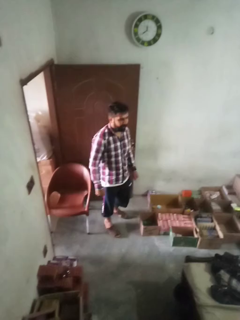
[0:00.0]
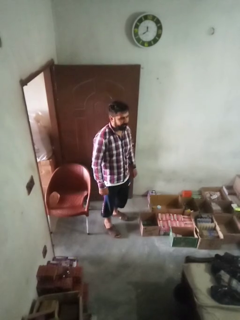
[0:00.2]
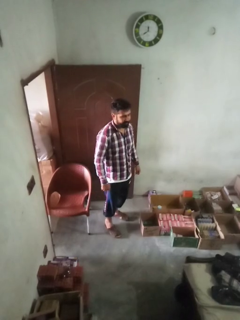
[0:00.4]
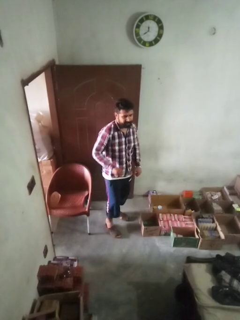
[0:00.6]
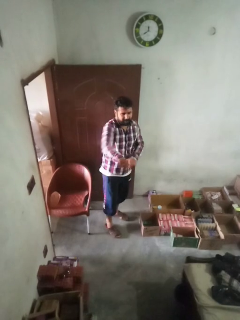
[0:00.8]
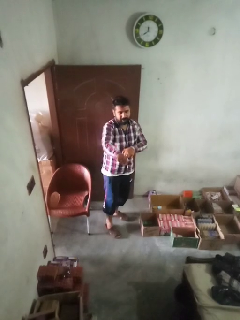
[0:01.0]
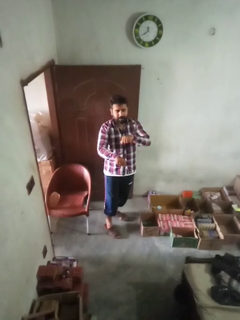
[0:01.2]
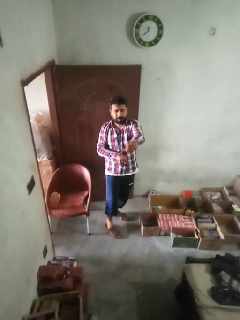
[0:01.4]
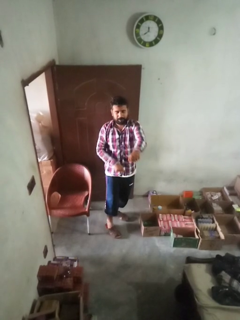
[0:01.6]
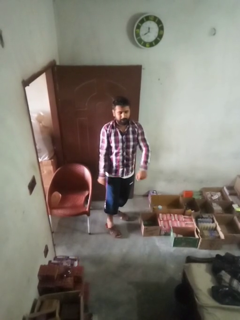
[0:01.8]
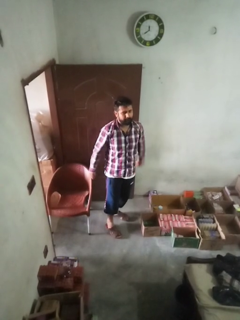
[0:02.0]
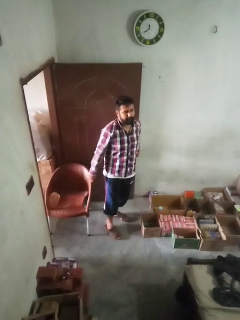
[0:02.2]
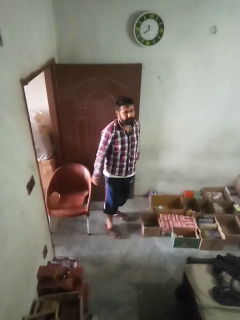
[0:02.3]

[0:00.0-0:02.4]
person karate chop

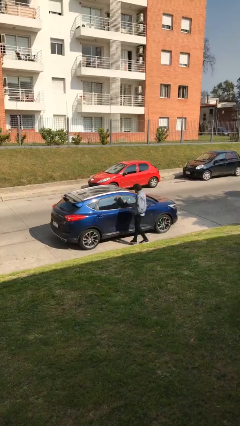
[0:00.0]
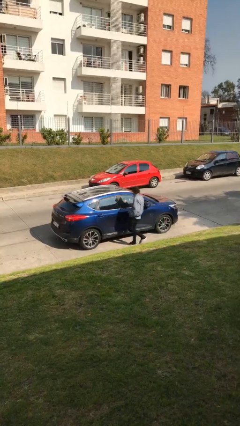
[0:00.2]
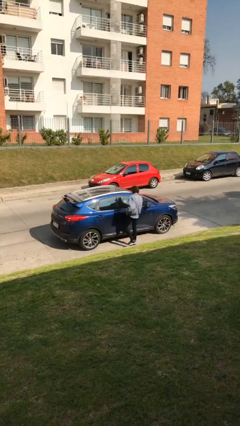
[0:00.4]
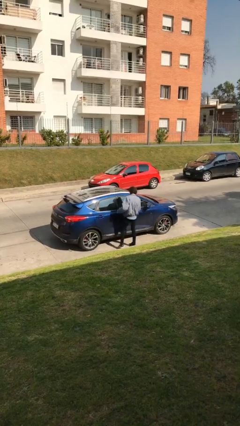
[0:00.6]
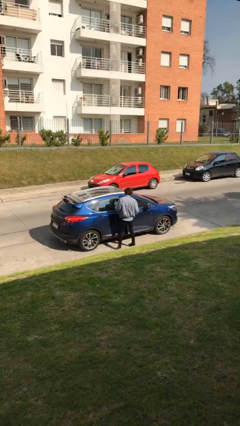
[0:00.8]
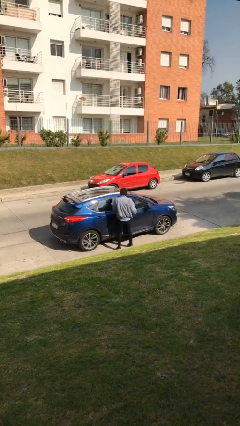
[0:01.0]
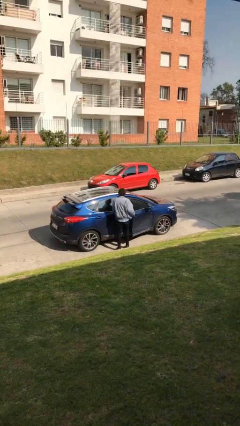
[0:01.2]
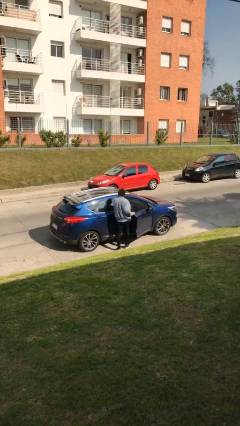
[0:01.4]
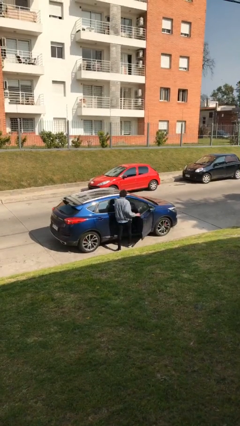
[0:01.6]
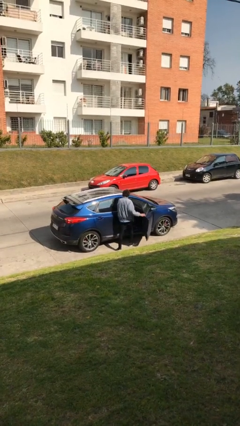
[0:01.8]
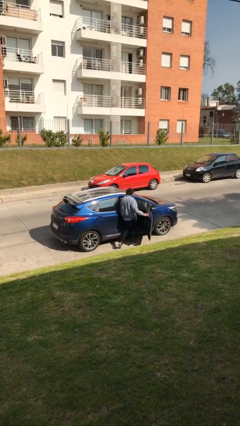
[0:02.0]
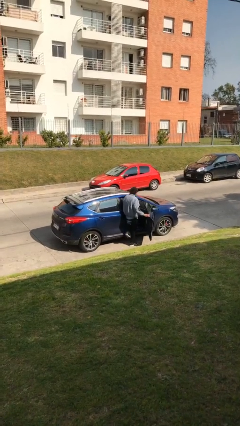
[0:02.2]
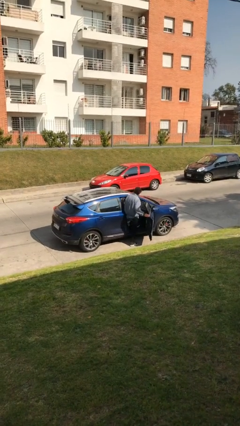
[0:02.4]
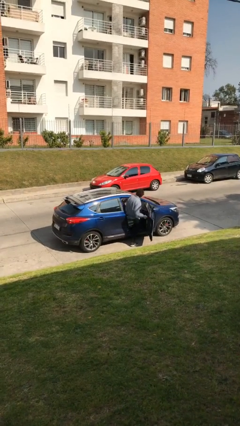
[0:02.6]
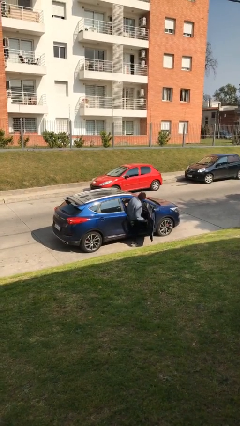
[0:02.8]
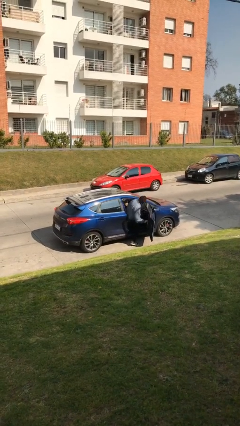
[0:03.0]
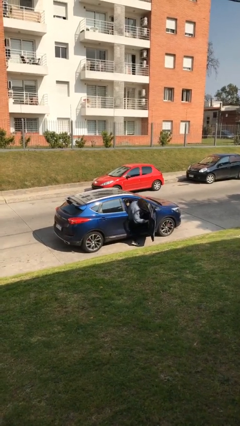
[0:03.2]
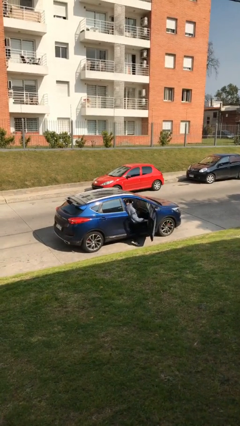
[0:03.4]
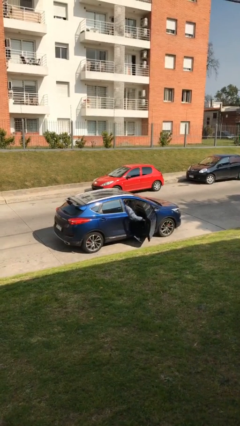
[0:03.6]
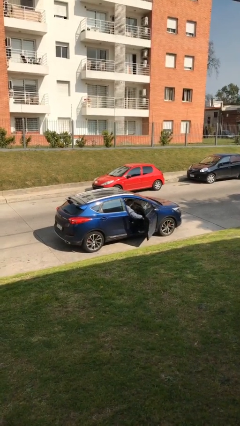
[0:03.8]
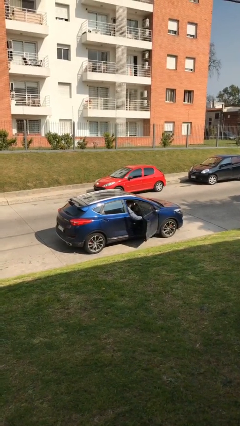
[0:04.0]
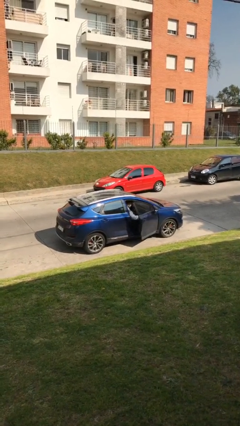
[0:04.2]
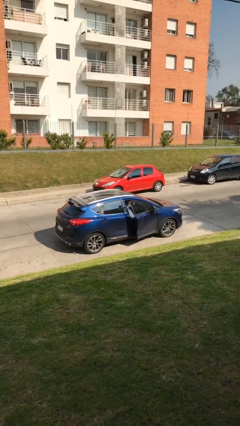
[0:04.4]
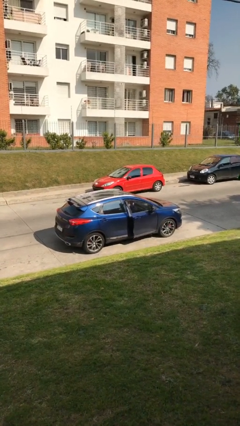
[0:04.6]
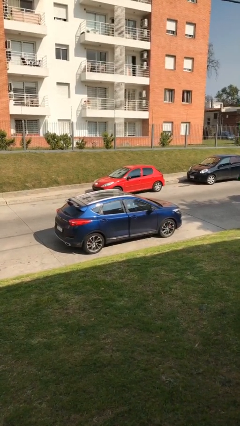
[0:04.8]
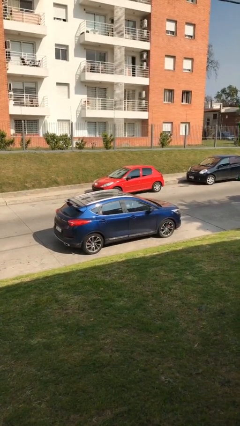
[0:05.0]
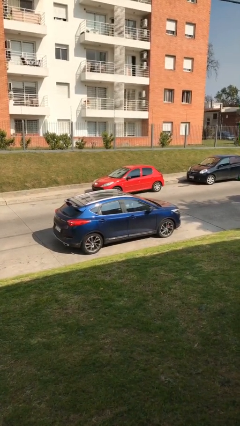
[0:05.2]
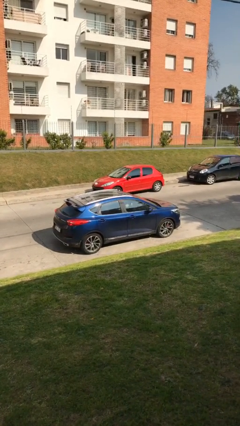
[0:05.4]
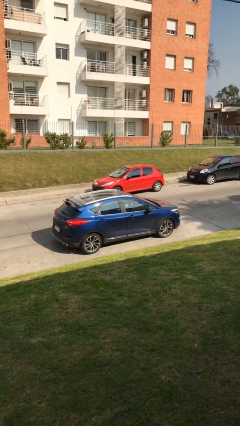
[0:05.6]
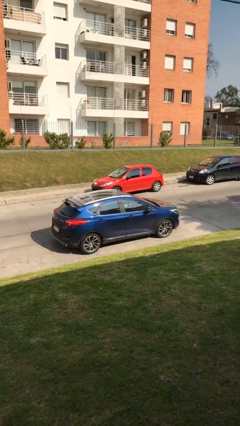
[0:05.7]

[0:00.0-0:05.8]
car picks up person

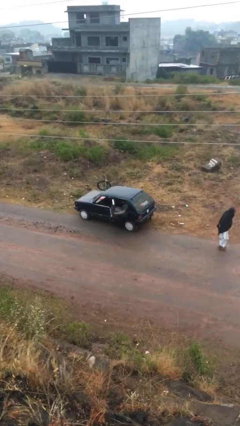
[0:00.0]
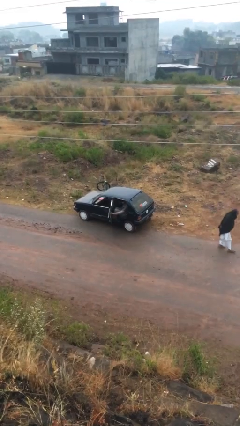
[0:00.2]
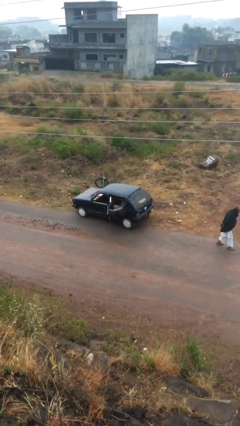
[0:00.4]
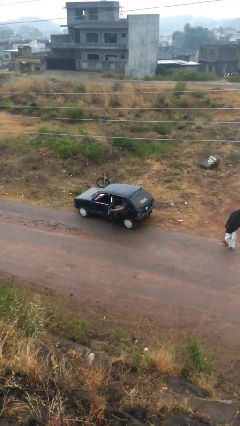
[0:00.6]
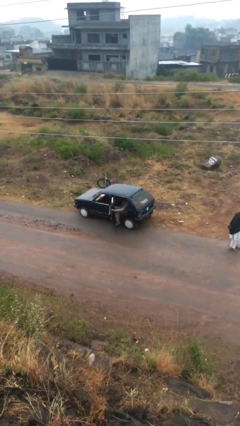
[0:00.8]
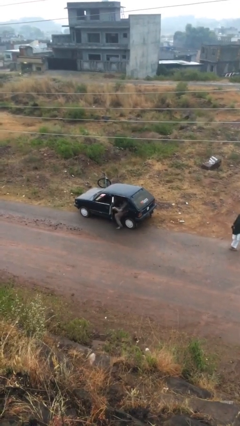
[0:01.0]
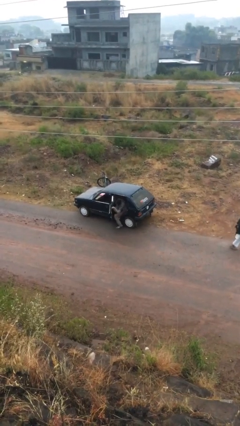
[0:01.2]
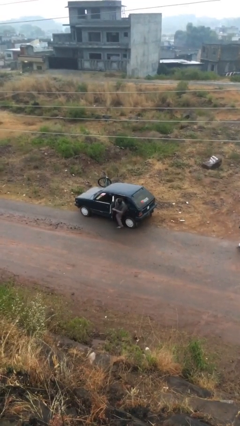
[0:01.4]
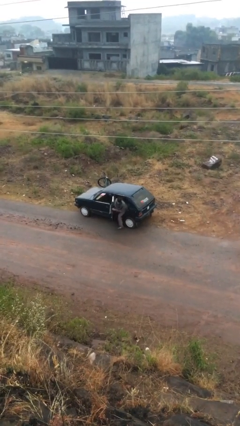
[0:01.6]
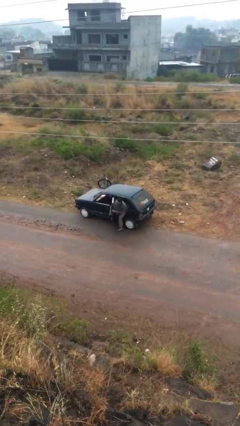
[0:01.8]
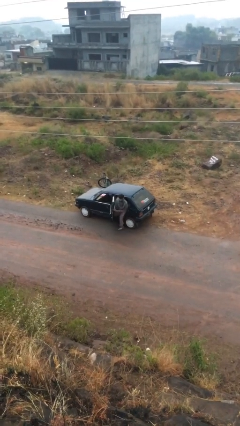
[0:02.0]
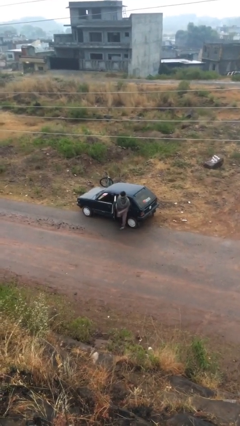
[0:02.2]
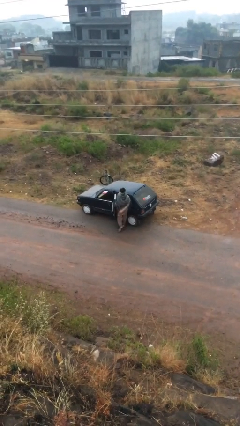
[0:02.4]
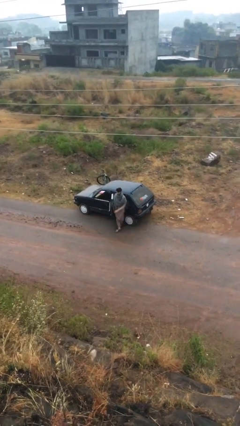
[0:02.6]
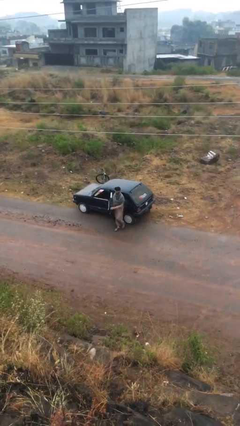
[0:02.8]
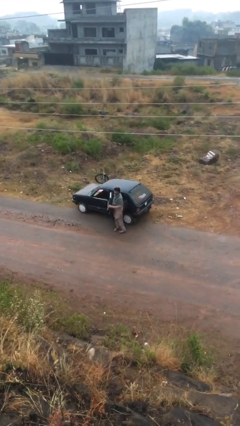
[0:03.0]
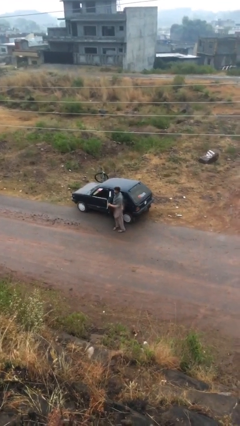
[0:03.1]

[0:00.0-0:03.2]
person exits car

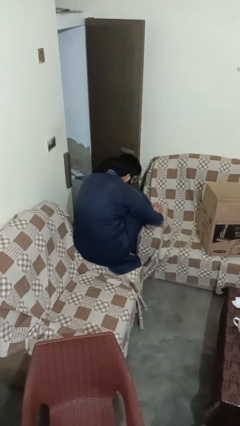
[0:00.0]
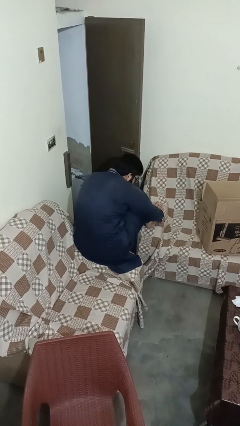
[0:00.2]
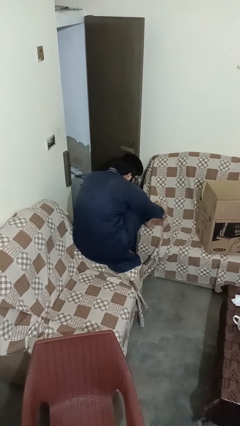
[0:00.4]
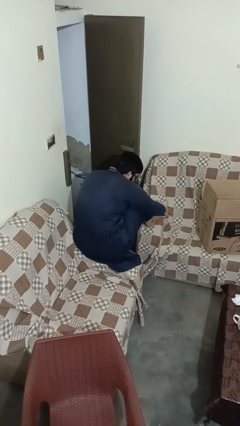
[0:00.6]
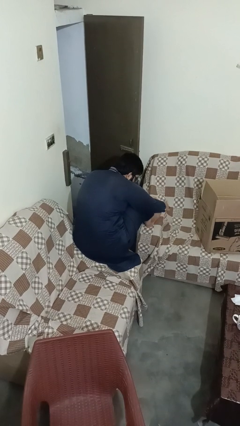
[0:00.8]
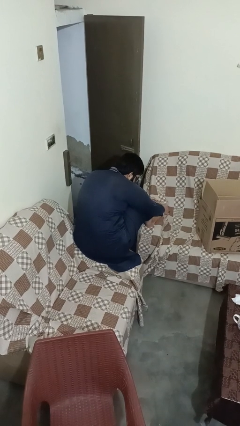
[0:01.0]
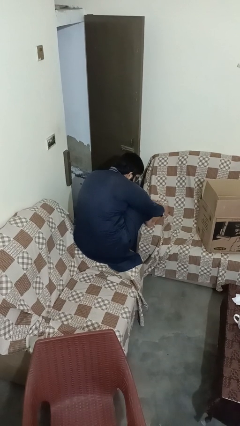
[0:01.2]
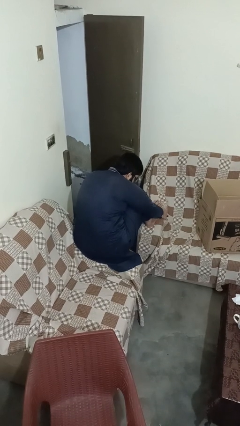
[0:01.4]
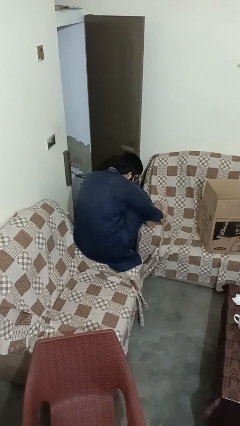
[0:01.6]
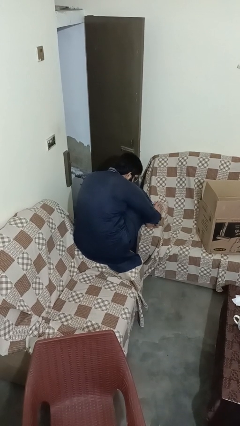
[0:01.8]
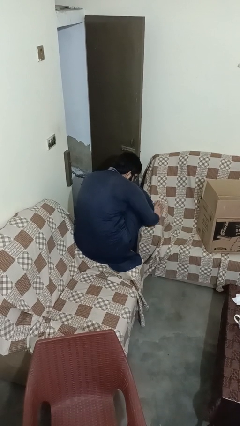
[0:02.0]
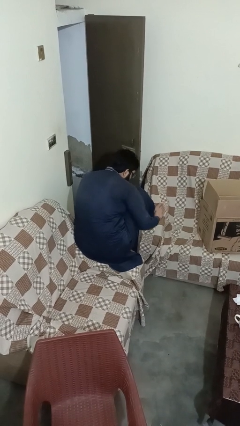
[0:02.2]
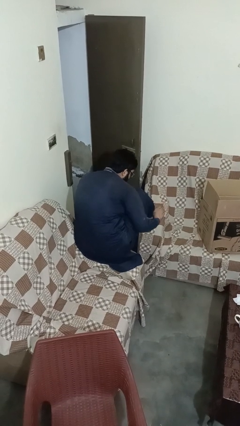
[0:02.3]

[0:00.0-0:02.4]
person rubs foot

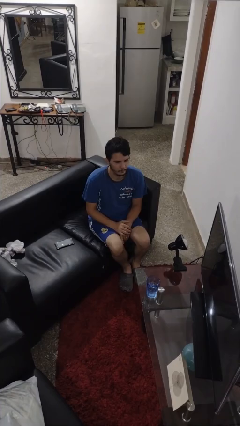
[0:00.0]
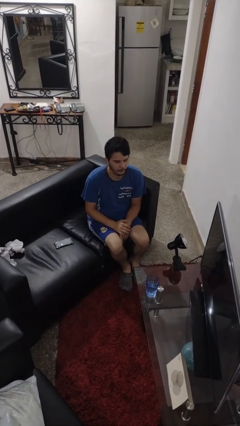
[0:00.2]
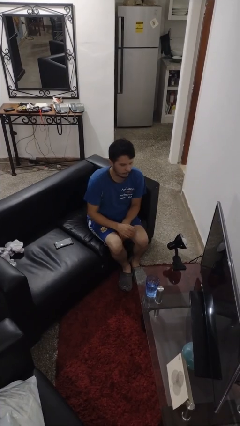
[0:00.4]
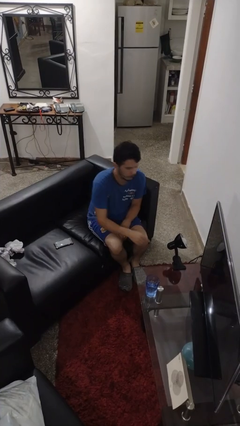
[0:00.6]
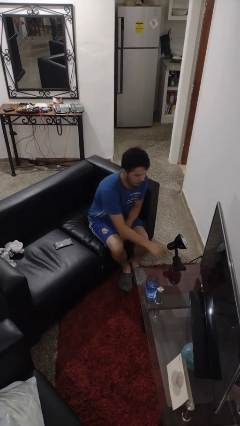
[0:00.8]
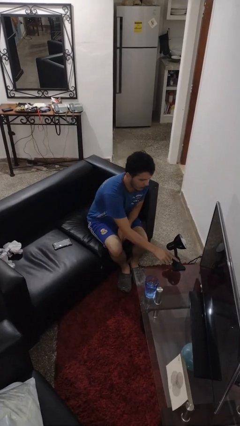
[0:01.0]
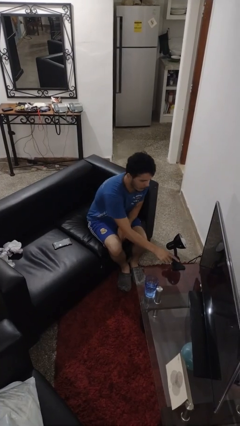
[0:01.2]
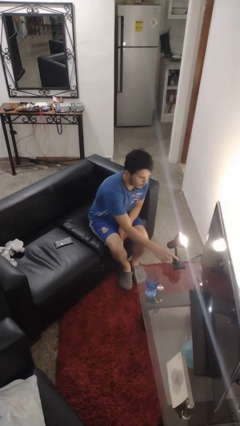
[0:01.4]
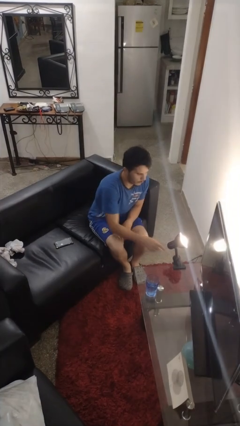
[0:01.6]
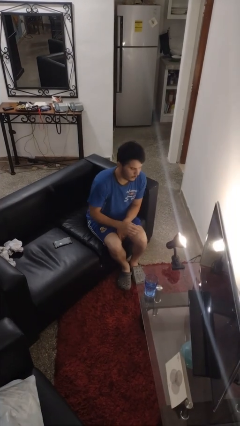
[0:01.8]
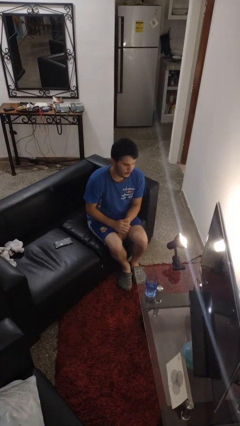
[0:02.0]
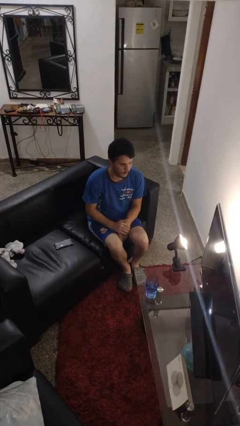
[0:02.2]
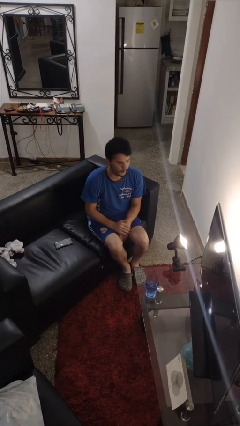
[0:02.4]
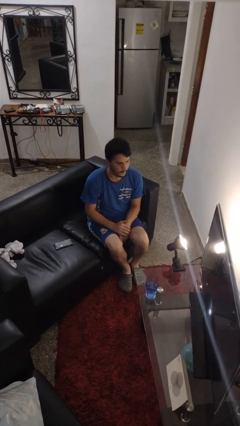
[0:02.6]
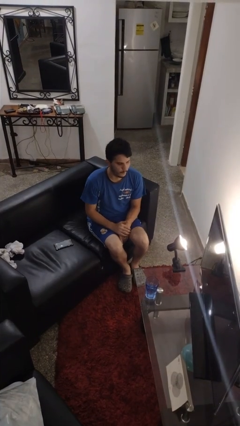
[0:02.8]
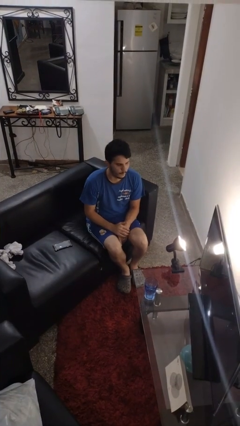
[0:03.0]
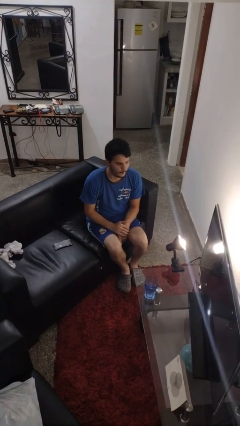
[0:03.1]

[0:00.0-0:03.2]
person turns on lamp

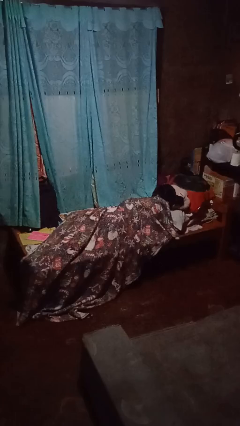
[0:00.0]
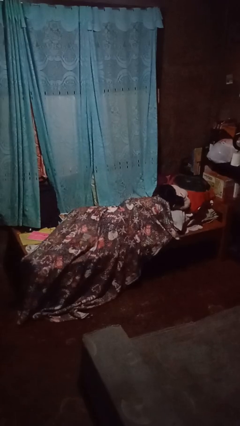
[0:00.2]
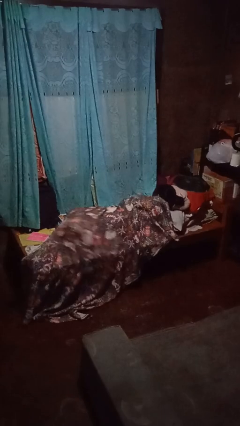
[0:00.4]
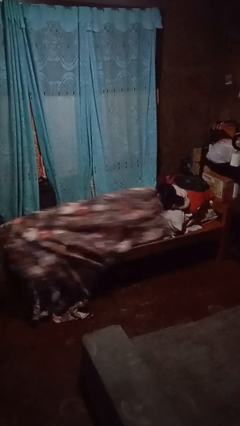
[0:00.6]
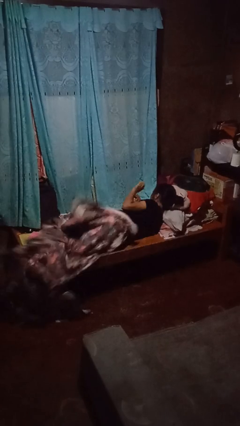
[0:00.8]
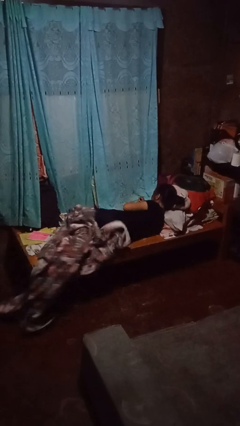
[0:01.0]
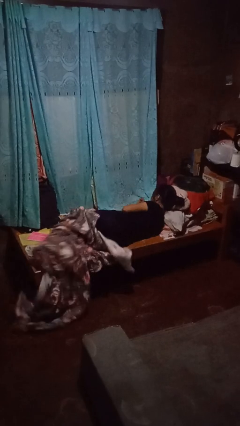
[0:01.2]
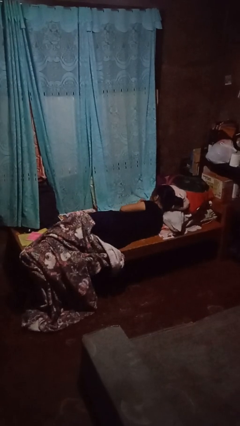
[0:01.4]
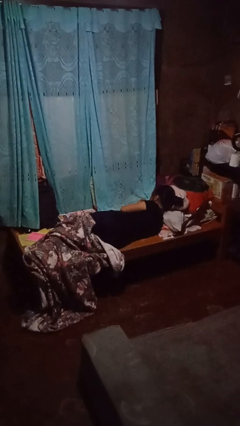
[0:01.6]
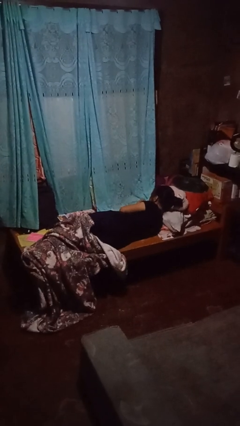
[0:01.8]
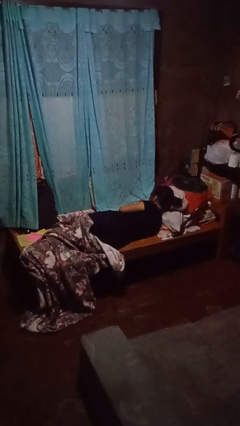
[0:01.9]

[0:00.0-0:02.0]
person uncovers with bedsheets
